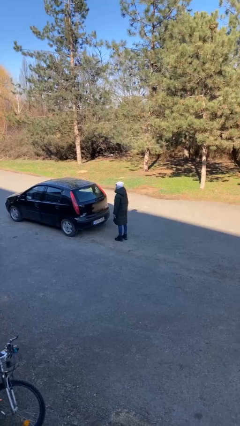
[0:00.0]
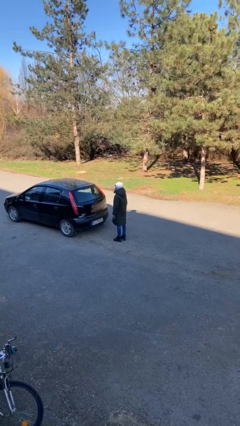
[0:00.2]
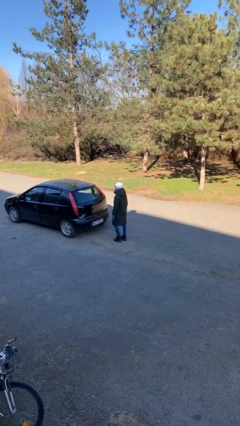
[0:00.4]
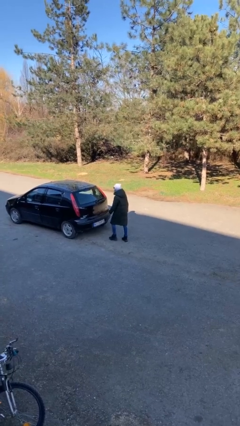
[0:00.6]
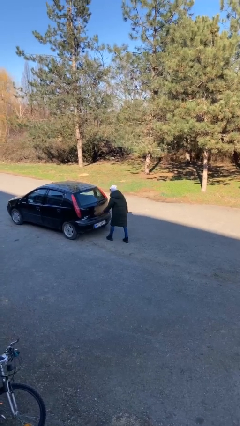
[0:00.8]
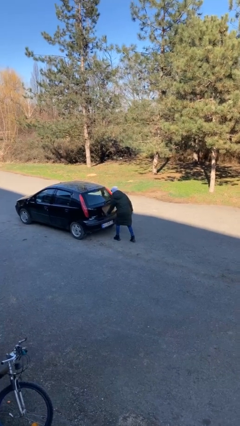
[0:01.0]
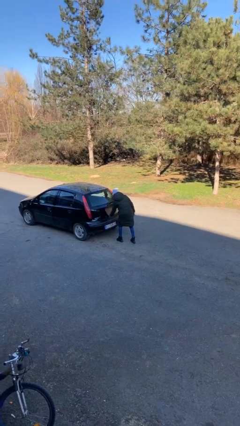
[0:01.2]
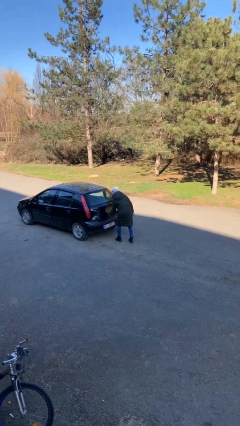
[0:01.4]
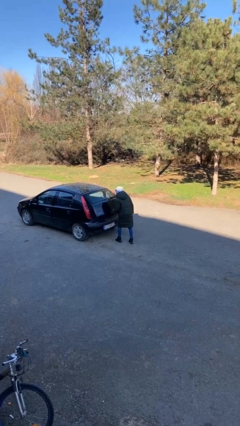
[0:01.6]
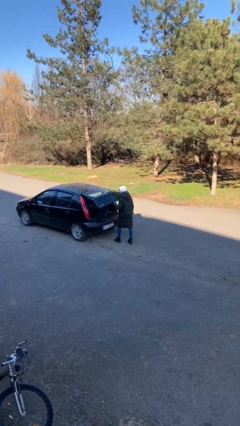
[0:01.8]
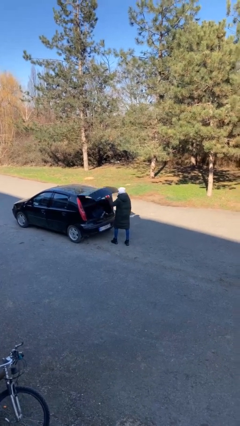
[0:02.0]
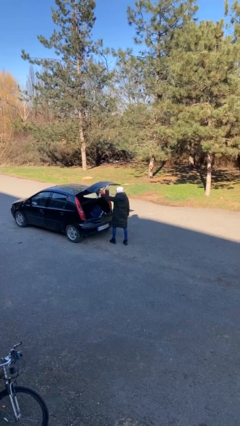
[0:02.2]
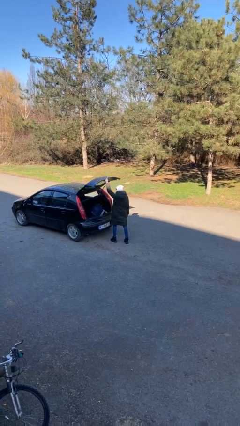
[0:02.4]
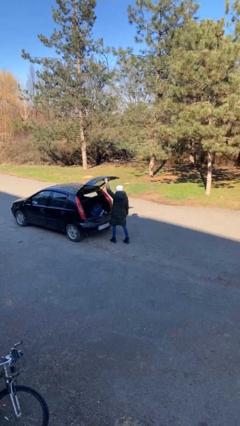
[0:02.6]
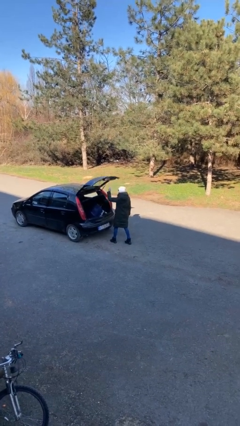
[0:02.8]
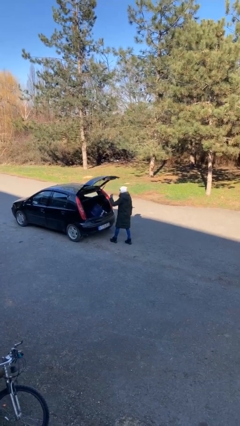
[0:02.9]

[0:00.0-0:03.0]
person opens car trunk

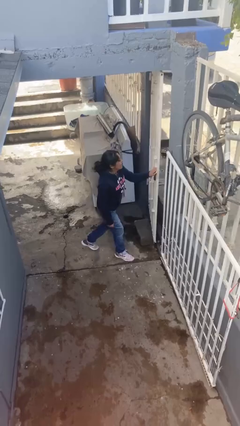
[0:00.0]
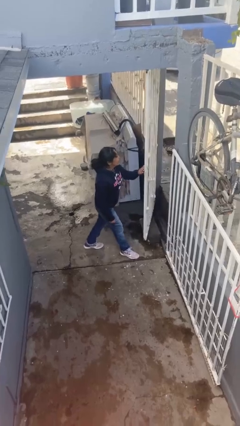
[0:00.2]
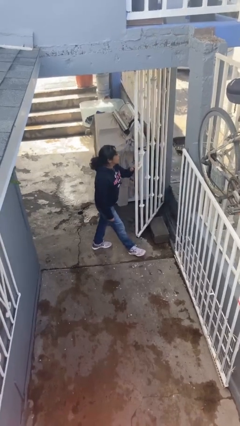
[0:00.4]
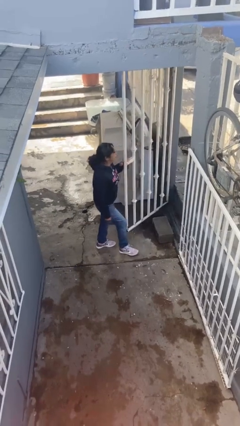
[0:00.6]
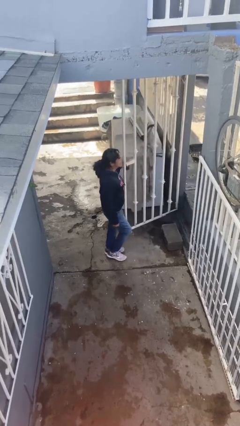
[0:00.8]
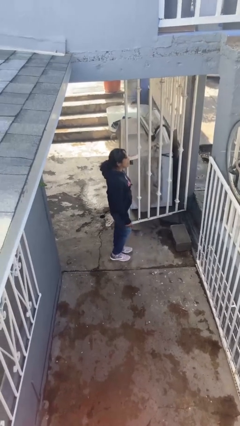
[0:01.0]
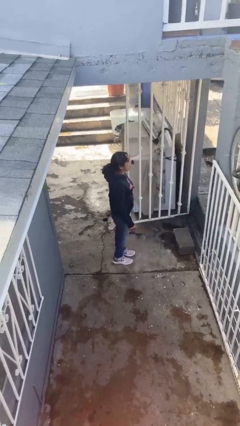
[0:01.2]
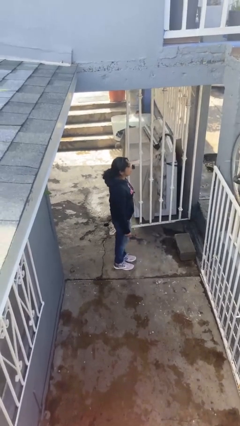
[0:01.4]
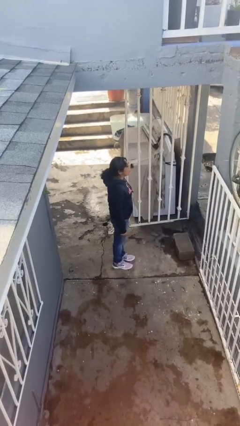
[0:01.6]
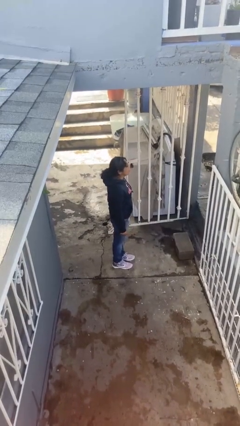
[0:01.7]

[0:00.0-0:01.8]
person opens facility door

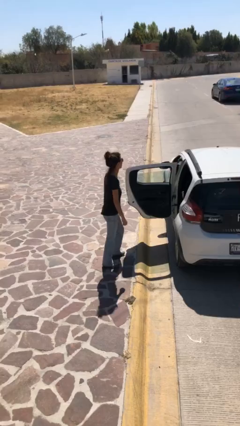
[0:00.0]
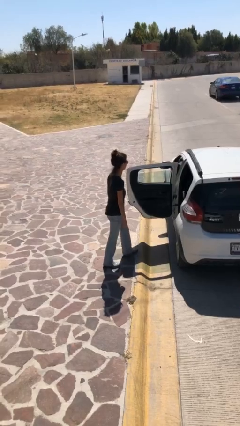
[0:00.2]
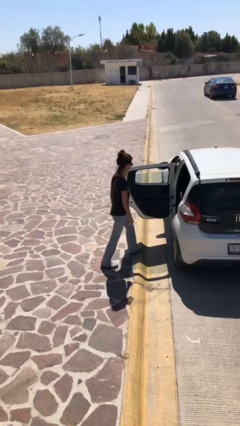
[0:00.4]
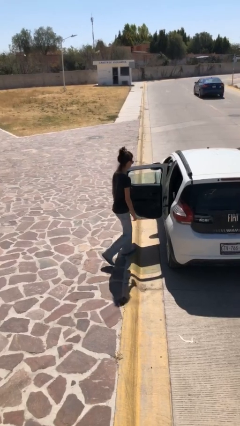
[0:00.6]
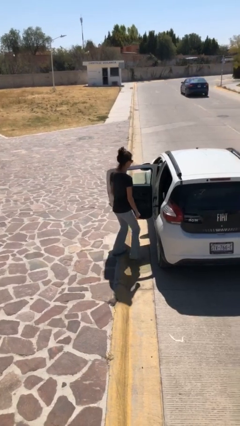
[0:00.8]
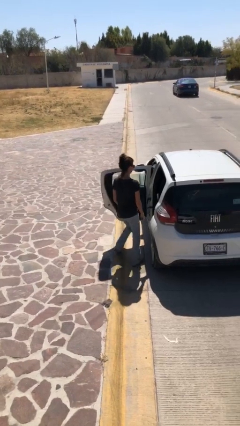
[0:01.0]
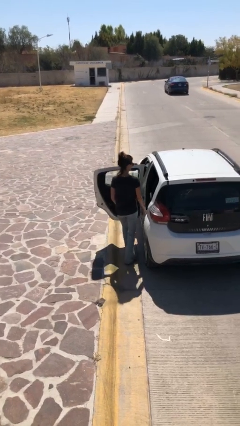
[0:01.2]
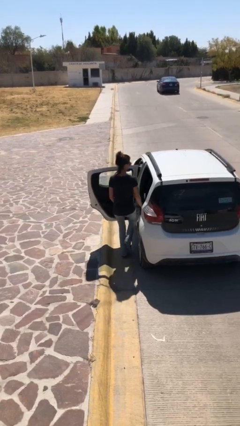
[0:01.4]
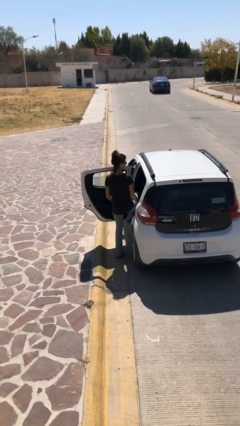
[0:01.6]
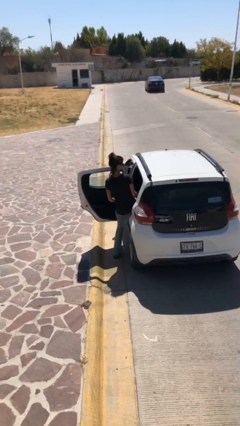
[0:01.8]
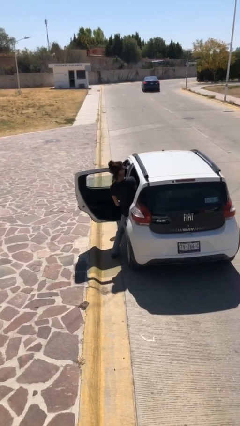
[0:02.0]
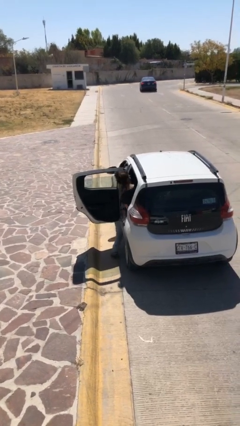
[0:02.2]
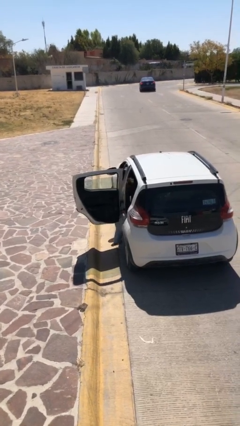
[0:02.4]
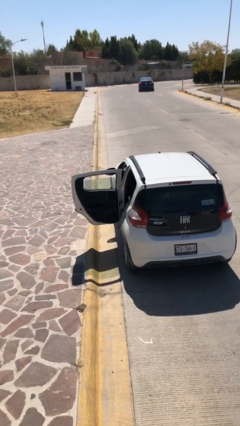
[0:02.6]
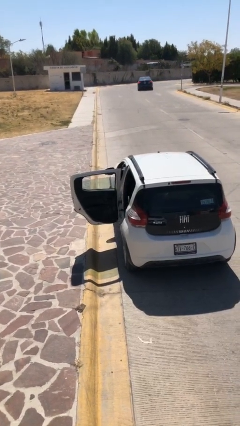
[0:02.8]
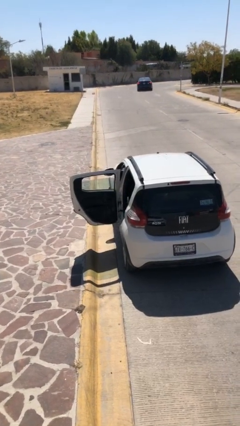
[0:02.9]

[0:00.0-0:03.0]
person enters car

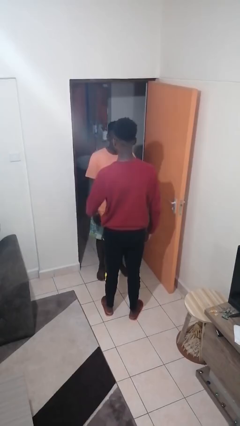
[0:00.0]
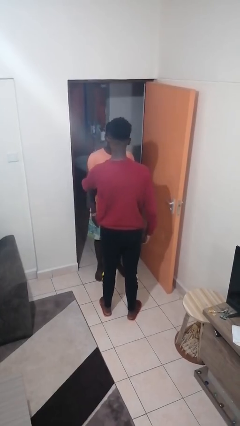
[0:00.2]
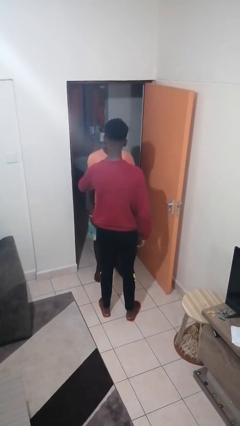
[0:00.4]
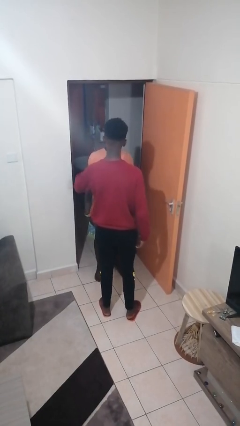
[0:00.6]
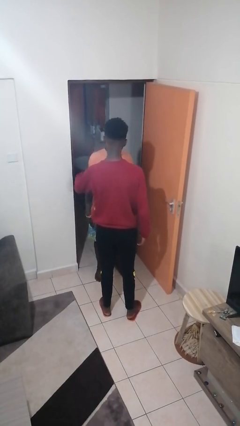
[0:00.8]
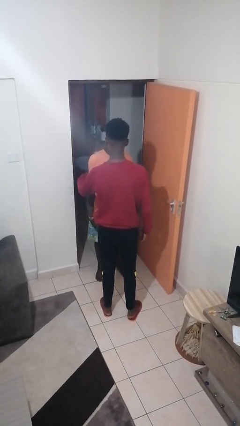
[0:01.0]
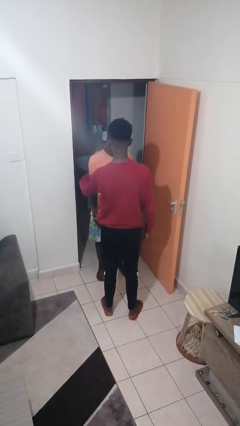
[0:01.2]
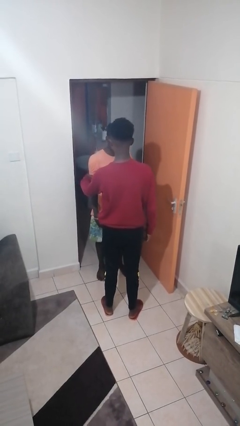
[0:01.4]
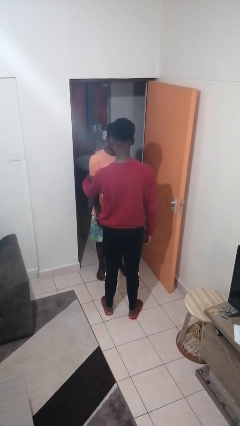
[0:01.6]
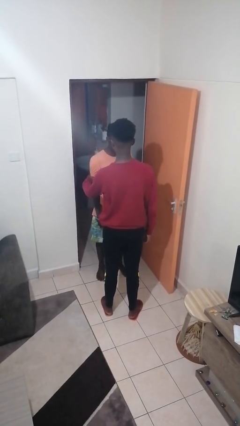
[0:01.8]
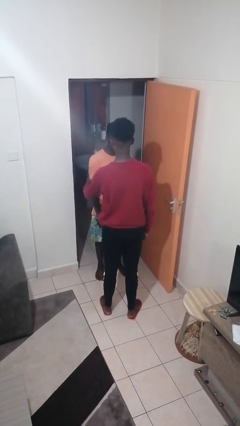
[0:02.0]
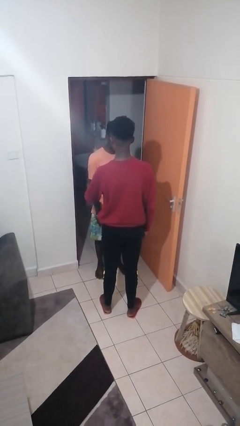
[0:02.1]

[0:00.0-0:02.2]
person grabs person by bicep

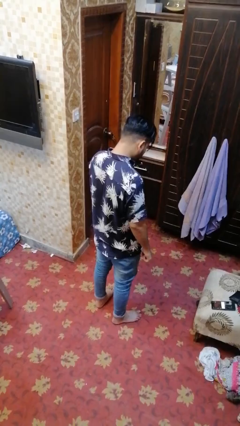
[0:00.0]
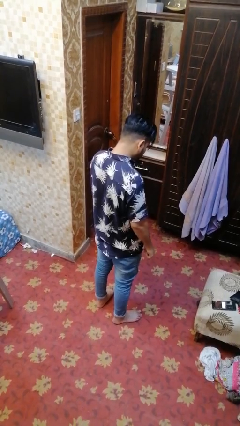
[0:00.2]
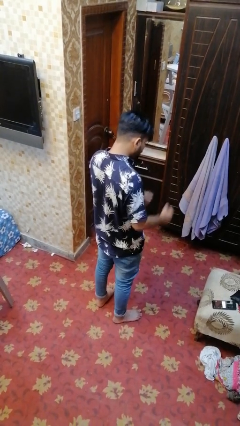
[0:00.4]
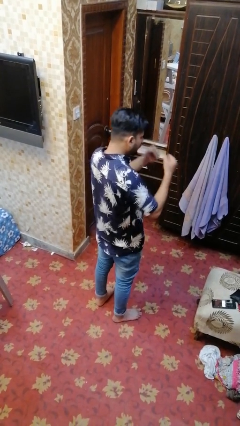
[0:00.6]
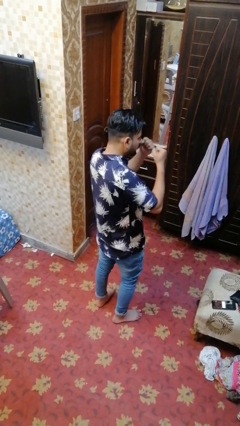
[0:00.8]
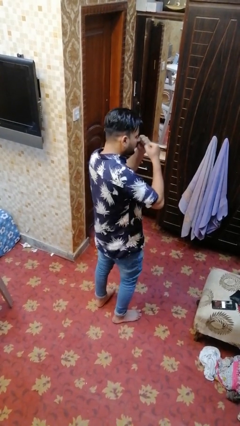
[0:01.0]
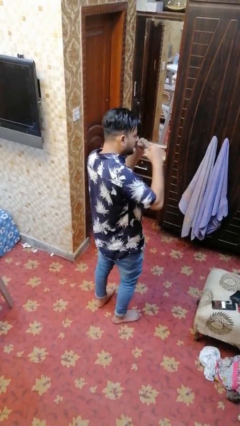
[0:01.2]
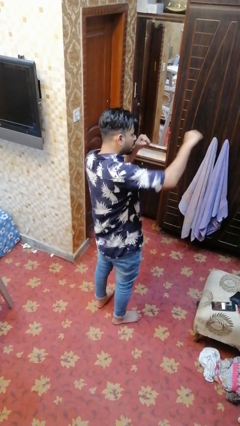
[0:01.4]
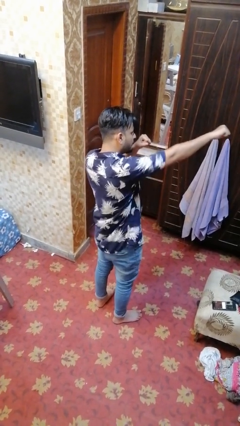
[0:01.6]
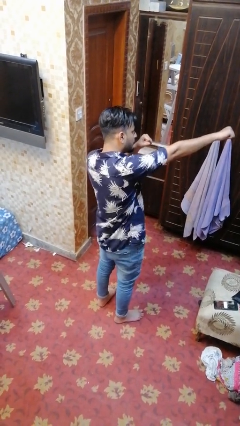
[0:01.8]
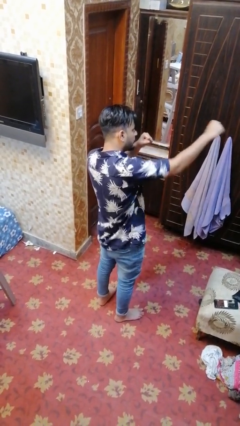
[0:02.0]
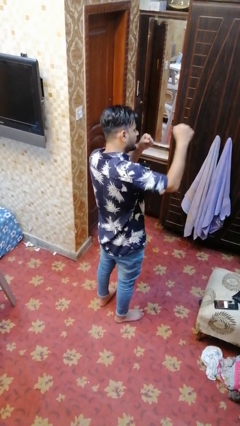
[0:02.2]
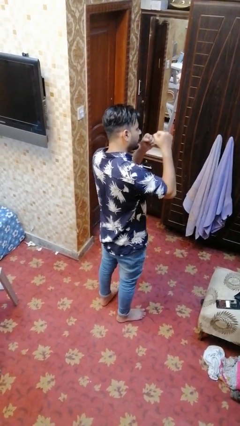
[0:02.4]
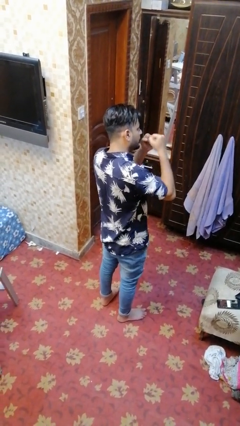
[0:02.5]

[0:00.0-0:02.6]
person punches

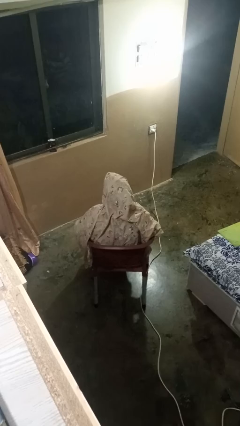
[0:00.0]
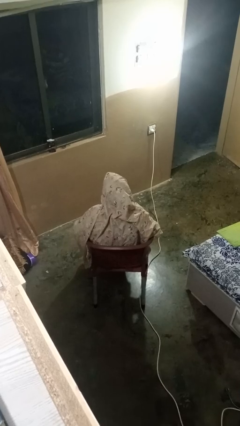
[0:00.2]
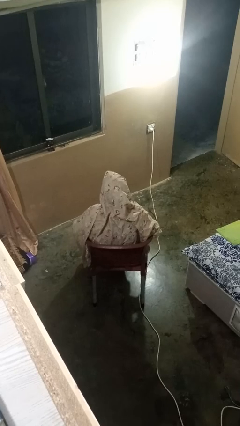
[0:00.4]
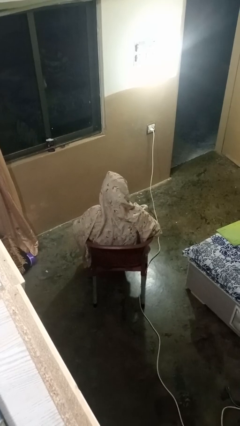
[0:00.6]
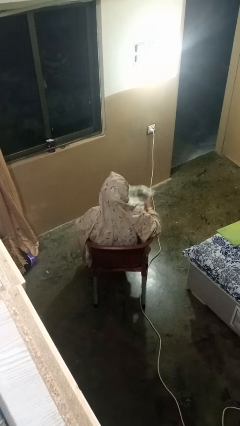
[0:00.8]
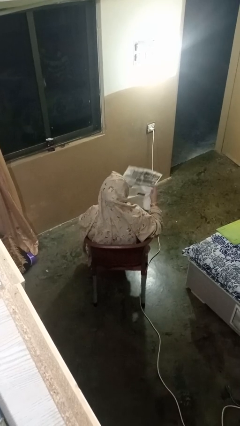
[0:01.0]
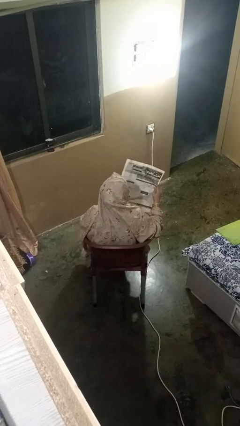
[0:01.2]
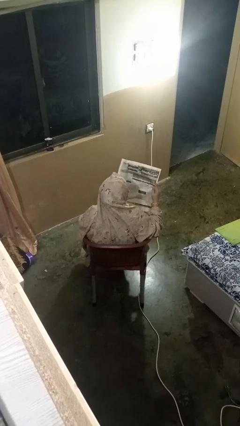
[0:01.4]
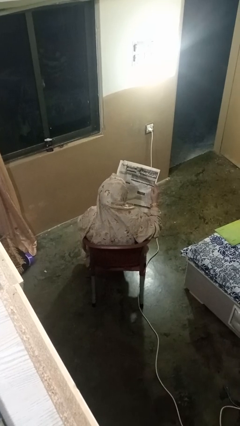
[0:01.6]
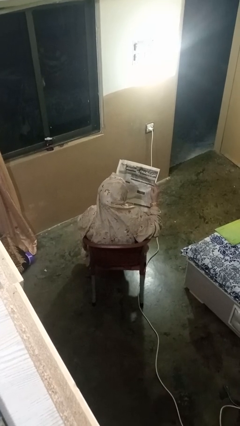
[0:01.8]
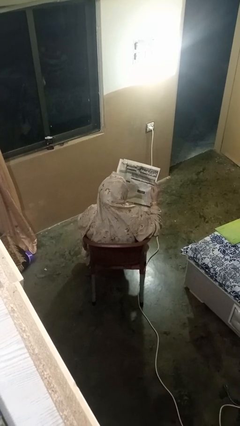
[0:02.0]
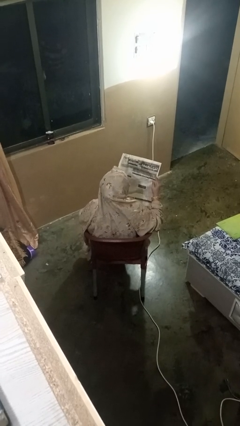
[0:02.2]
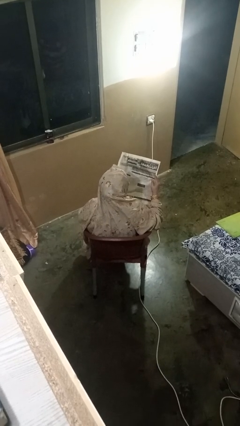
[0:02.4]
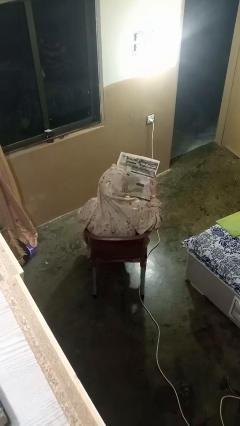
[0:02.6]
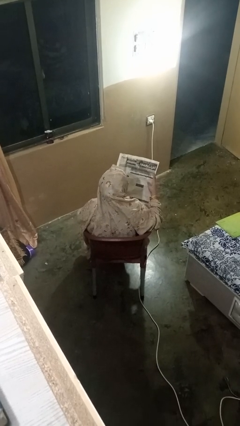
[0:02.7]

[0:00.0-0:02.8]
person reads newspaper

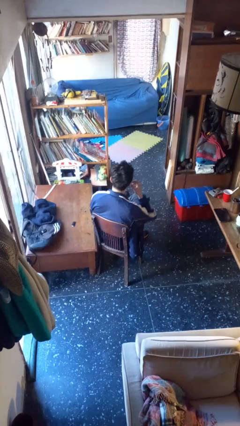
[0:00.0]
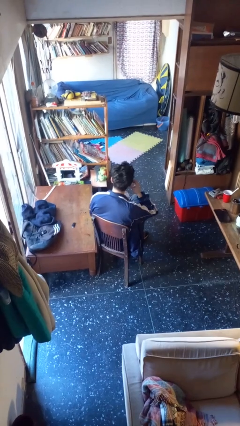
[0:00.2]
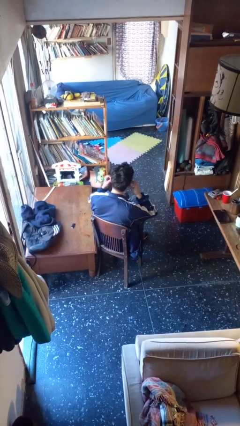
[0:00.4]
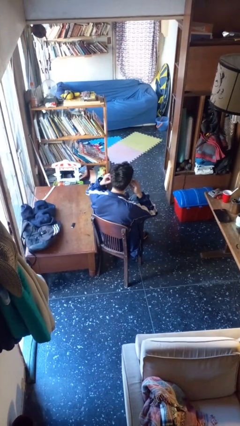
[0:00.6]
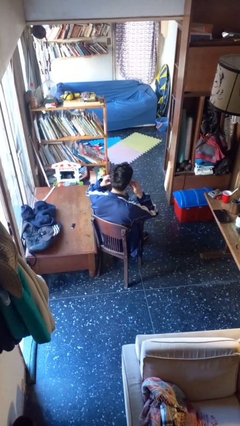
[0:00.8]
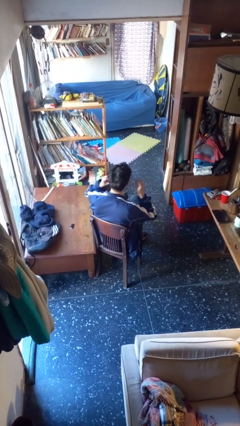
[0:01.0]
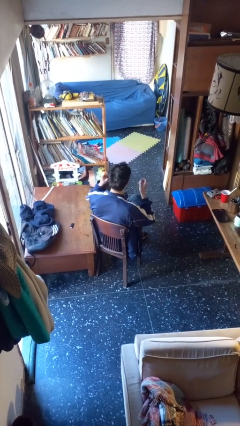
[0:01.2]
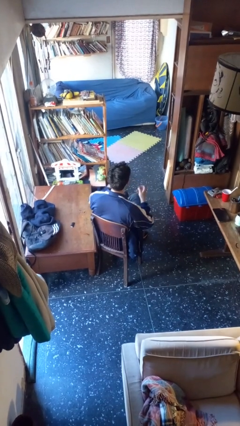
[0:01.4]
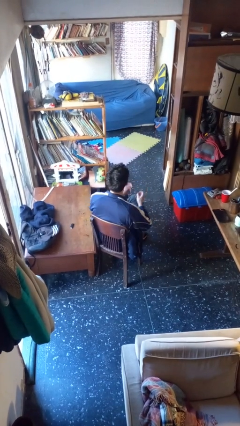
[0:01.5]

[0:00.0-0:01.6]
person takes off headphones

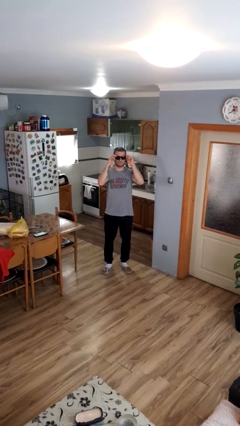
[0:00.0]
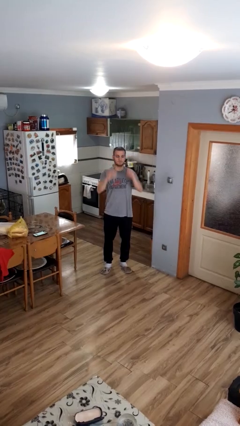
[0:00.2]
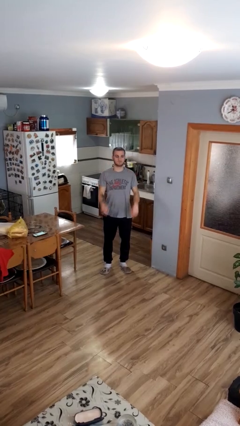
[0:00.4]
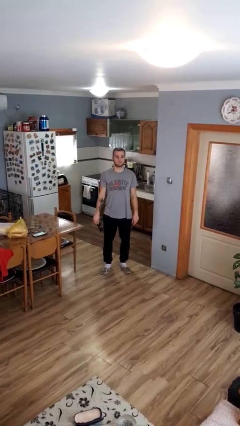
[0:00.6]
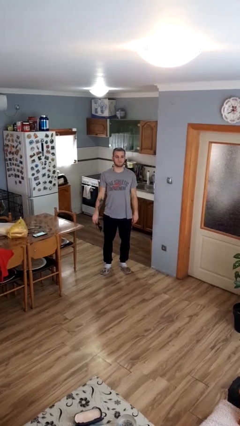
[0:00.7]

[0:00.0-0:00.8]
person takes off sunglasses
